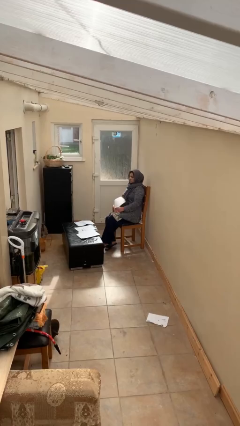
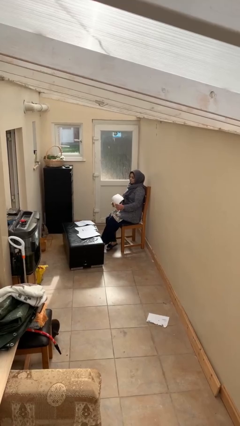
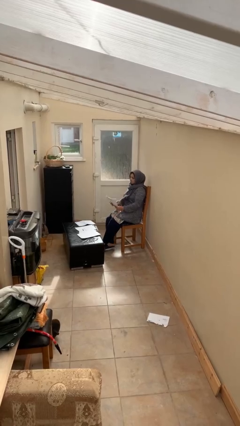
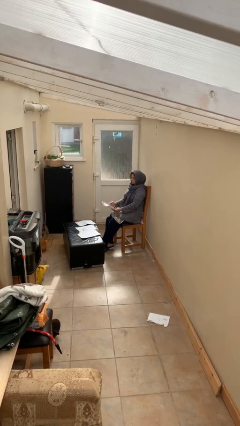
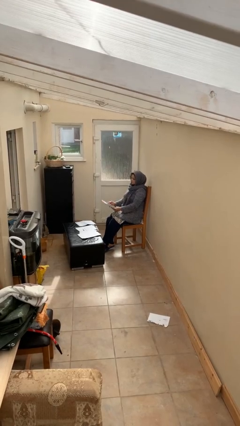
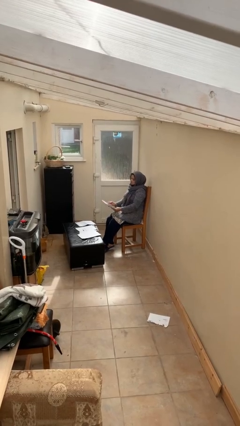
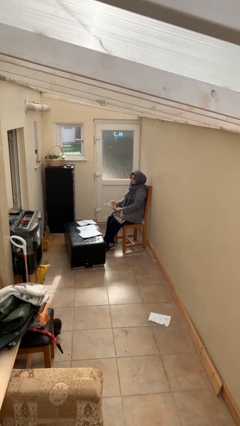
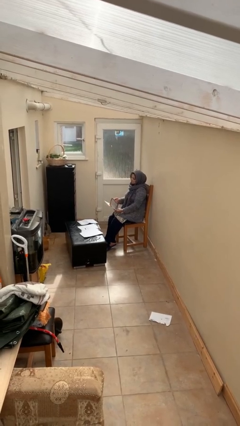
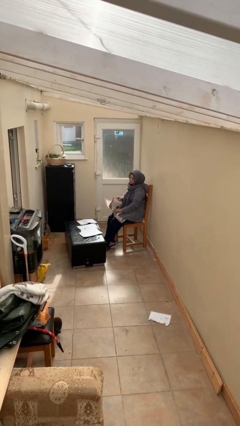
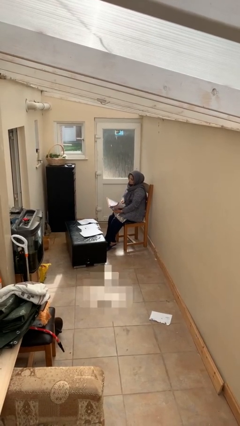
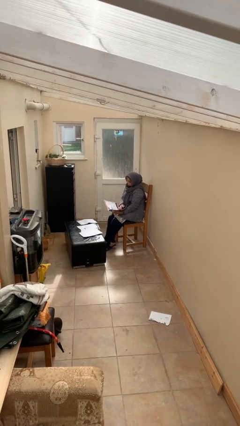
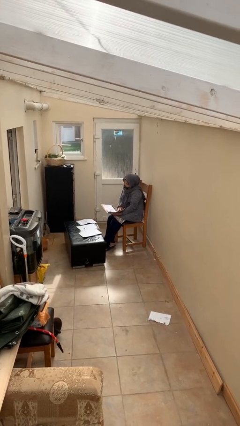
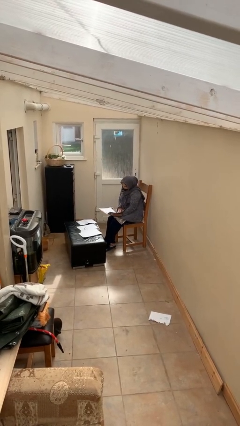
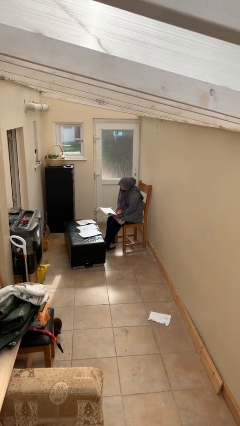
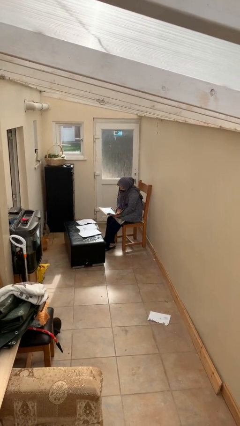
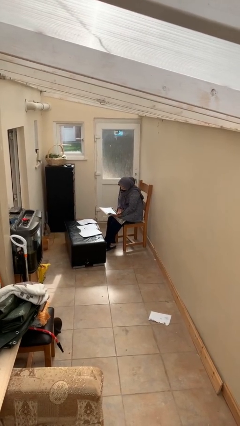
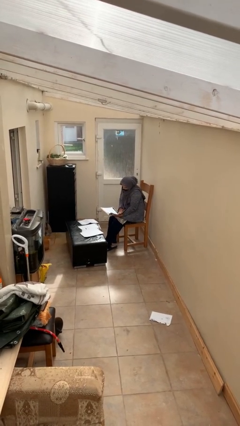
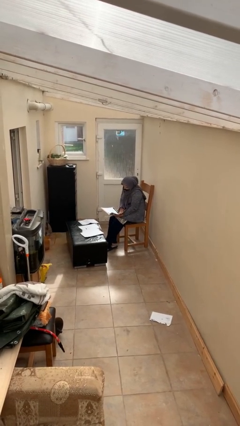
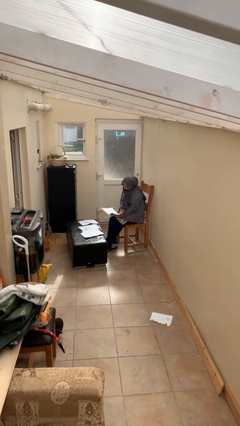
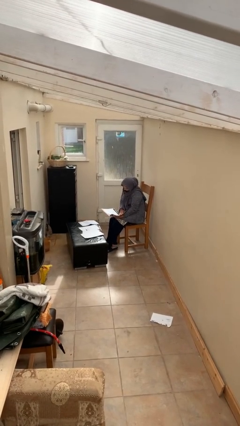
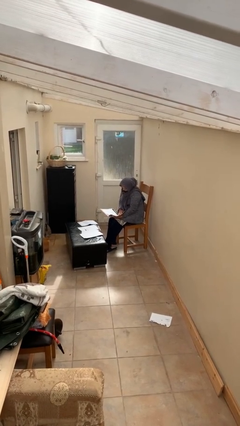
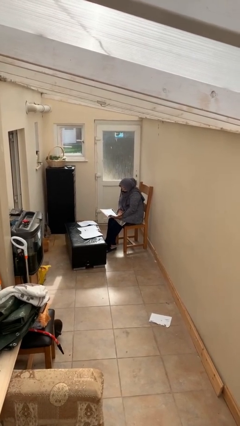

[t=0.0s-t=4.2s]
person reads document

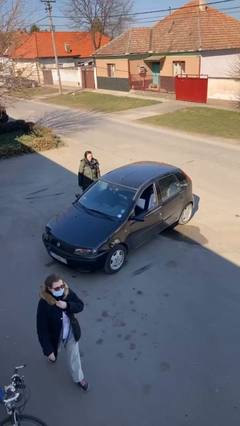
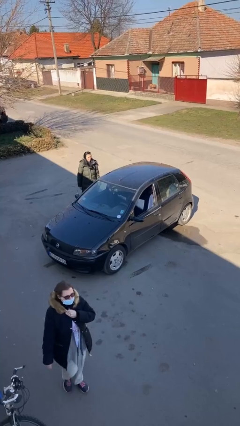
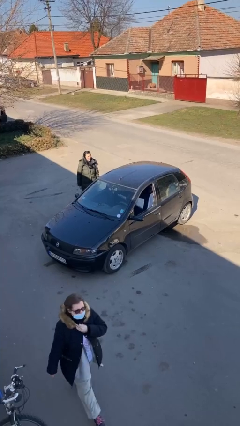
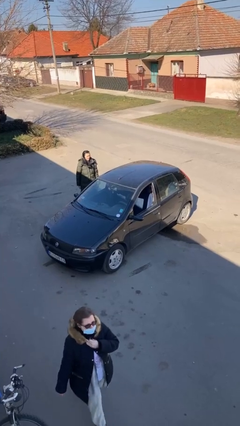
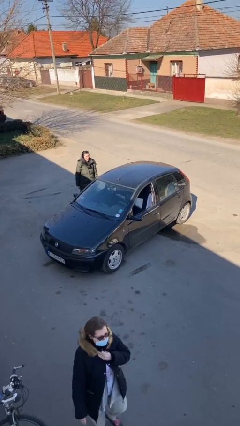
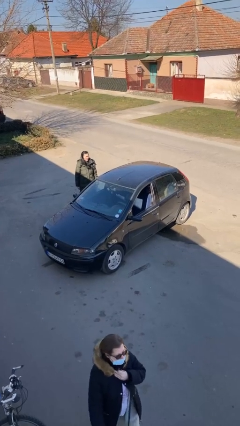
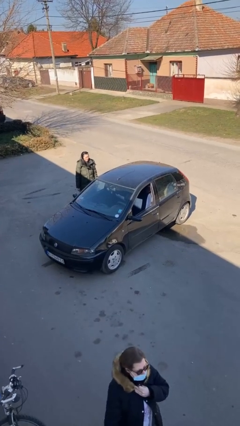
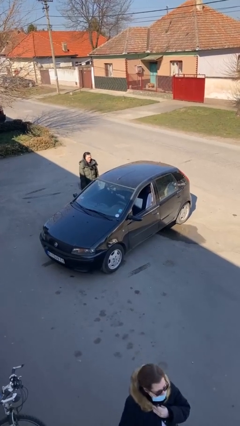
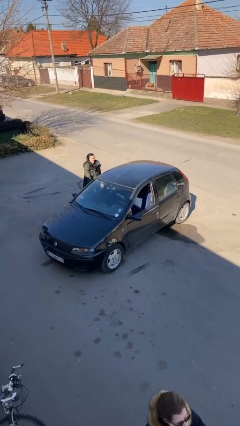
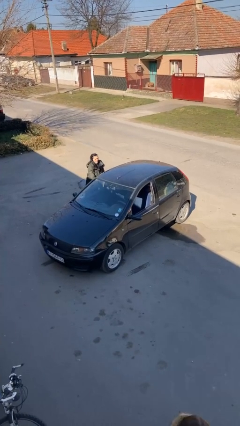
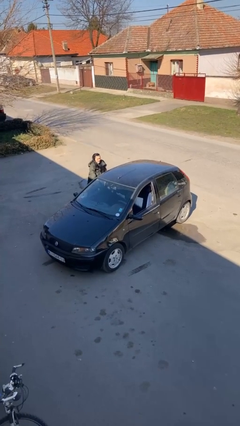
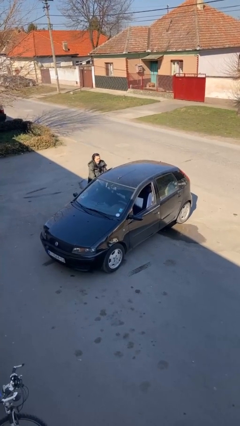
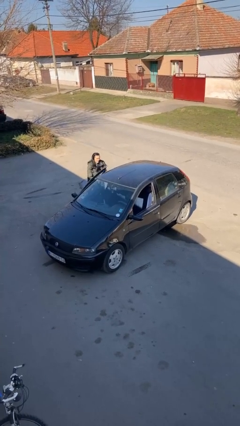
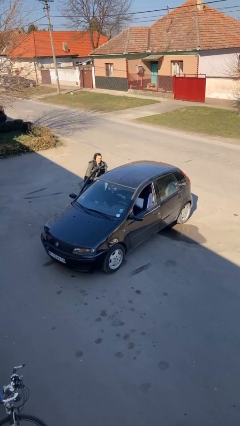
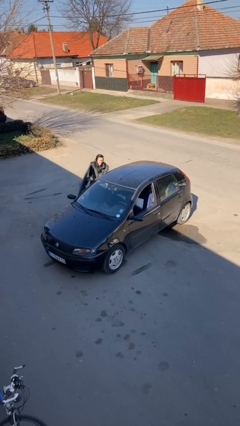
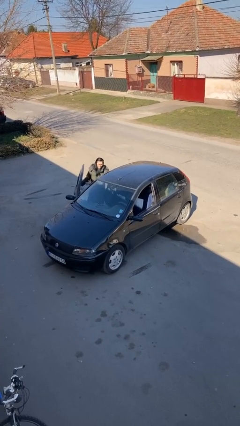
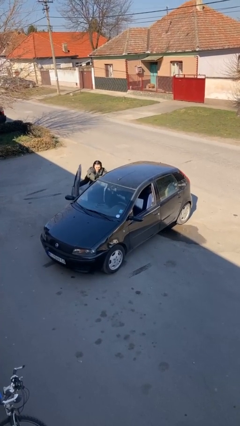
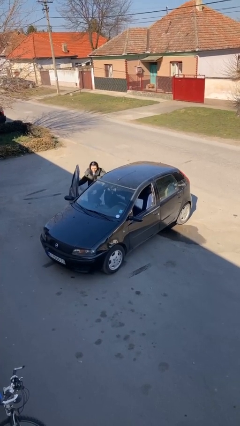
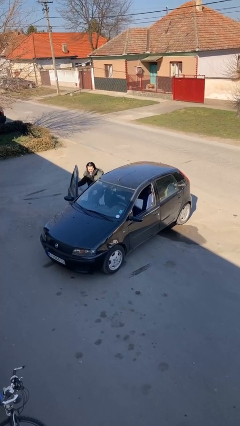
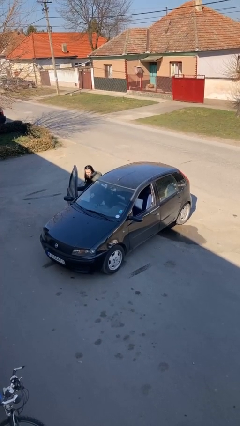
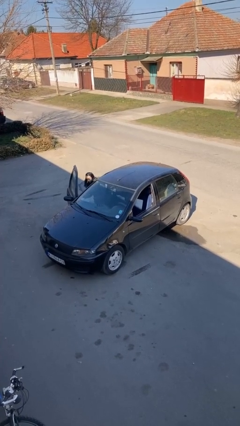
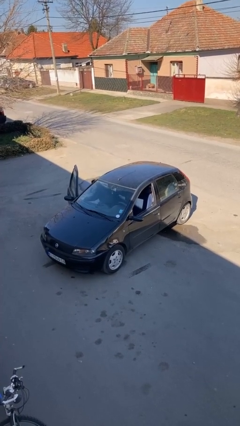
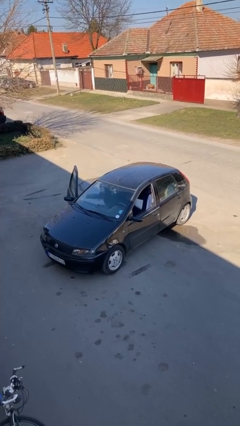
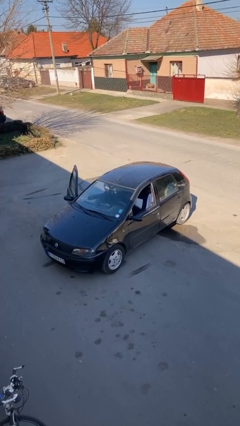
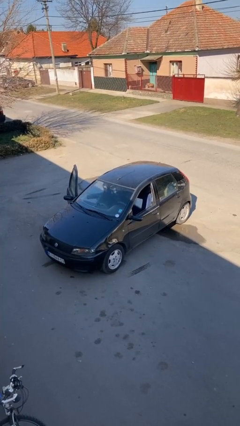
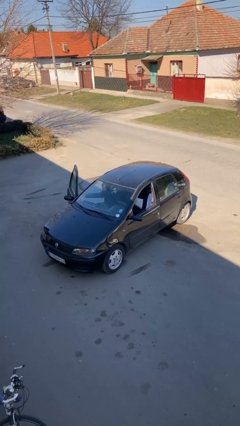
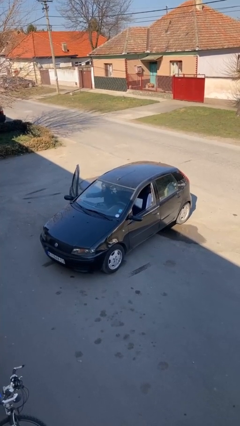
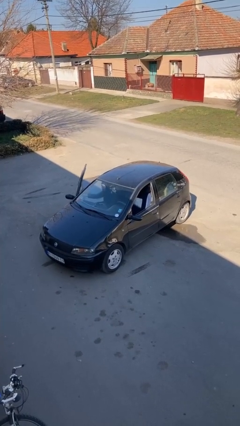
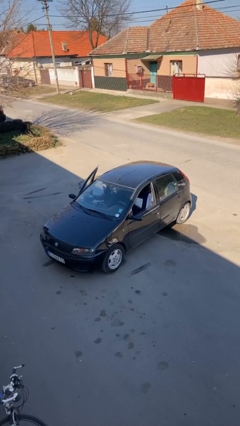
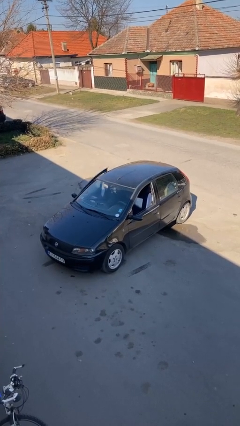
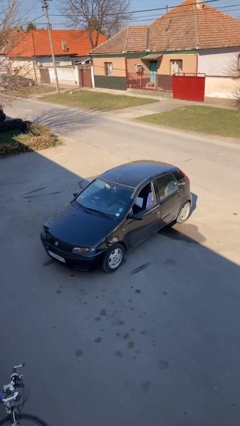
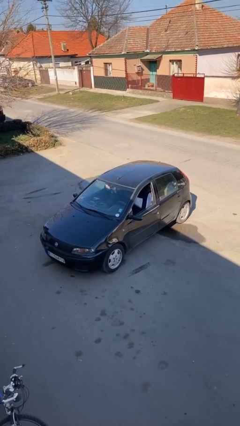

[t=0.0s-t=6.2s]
car picks up person

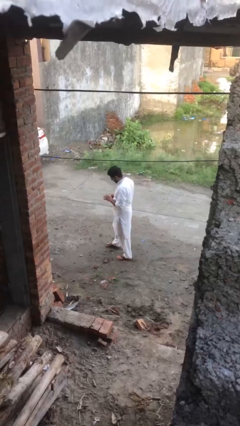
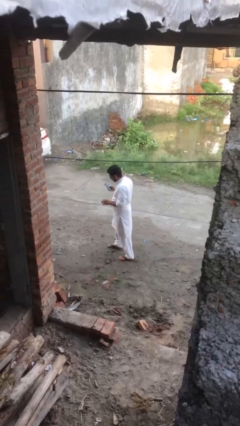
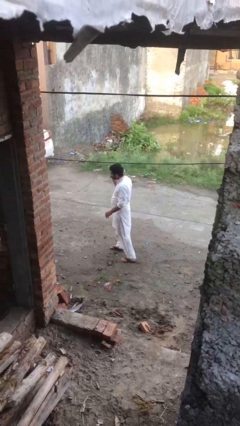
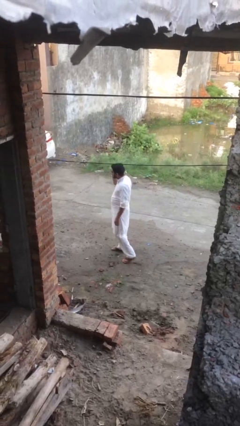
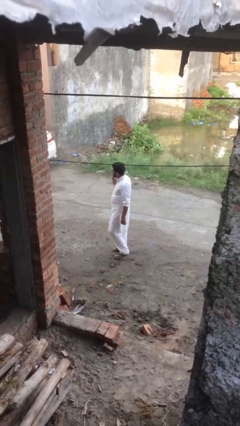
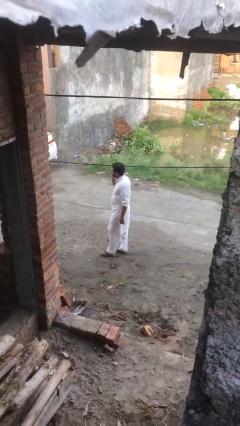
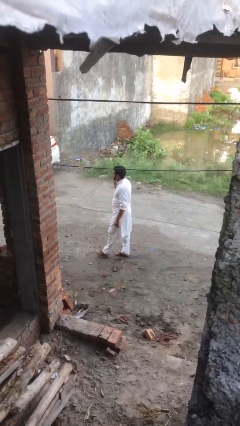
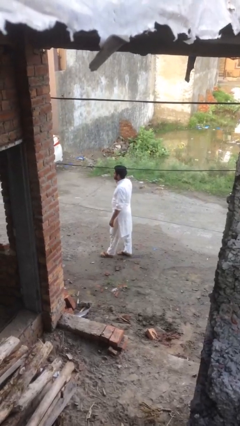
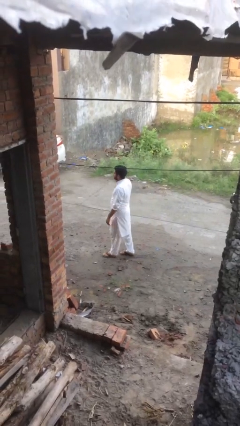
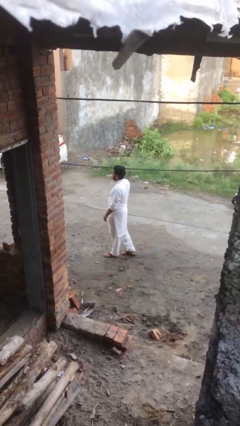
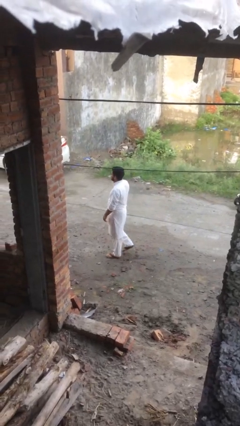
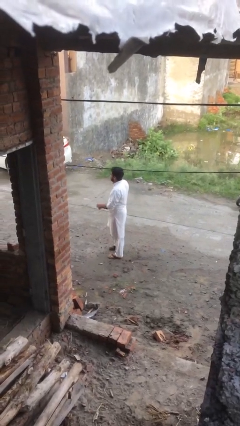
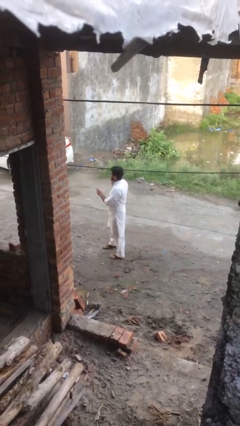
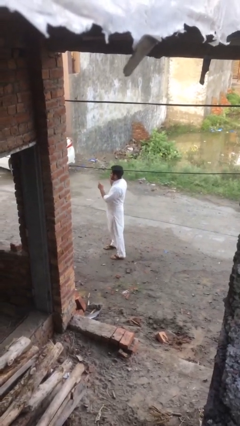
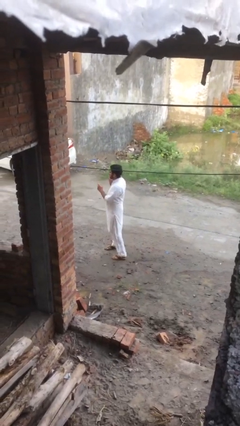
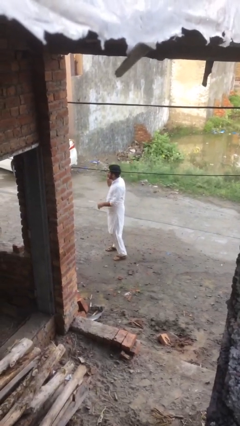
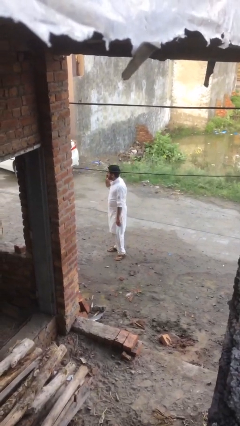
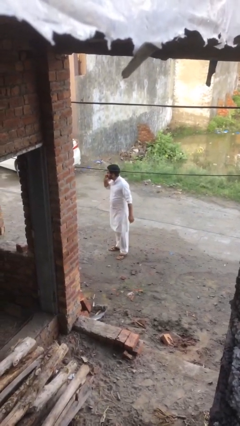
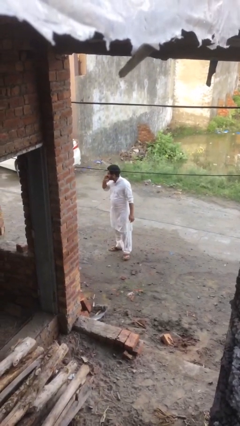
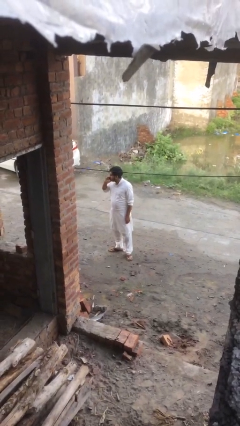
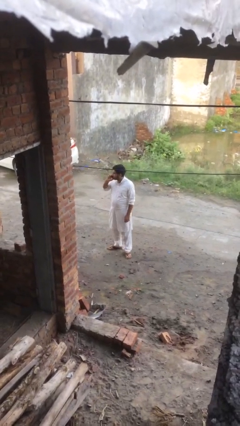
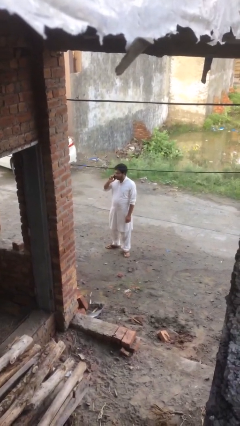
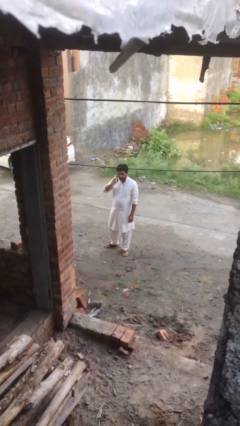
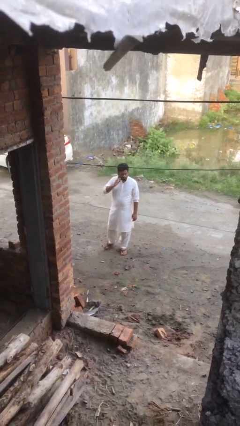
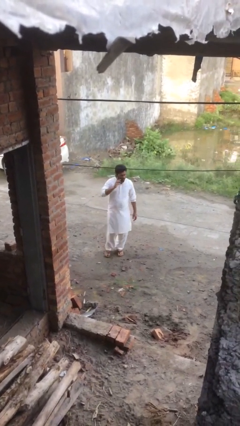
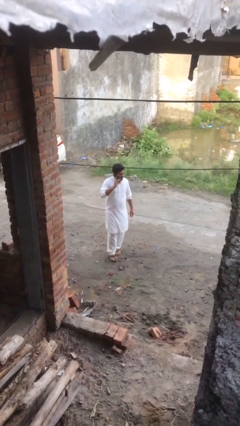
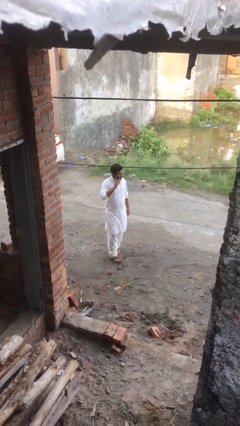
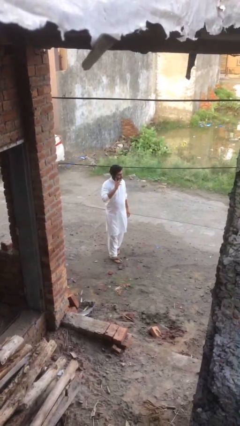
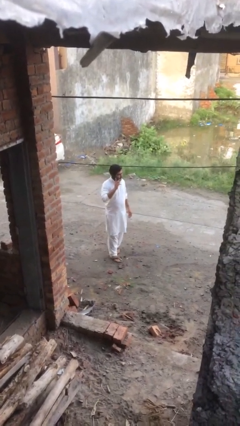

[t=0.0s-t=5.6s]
person talks on phone

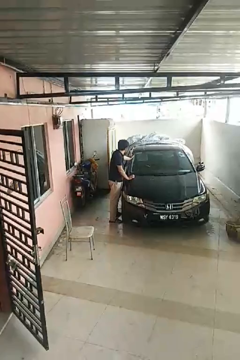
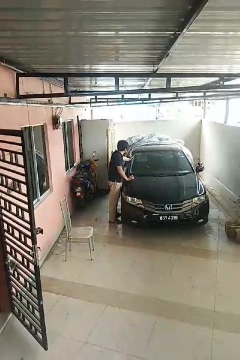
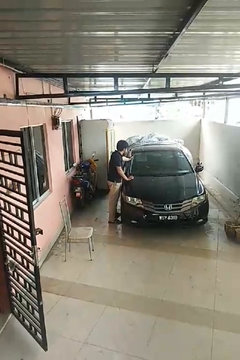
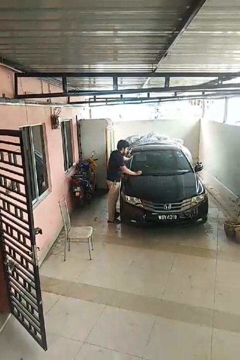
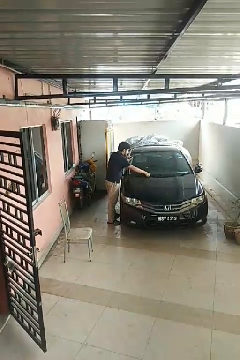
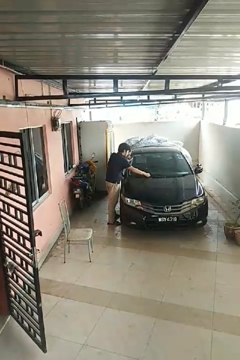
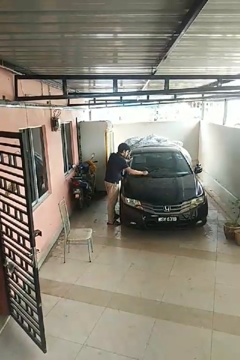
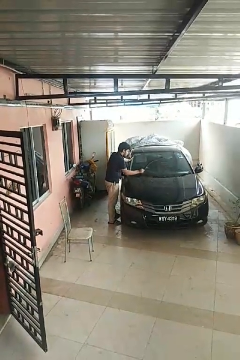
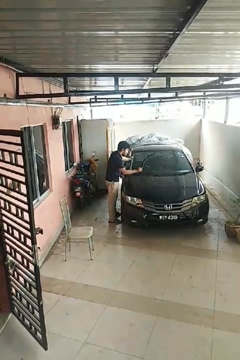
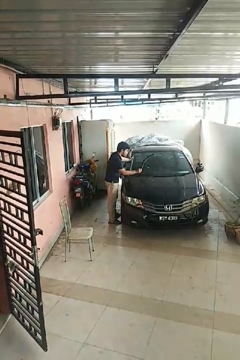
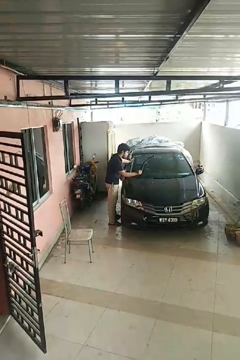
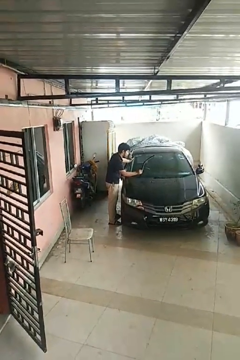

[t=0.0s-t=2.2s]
person flips up car wipers

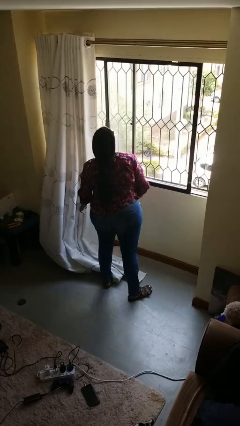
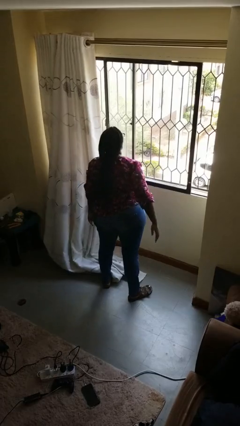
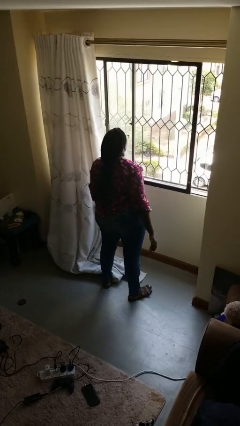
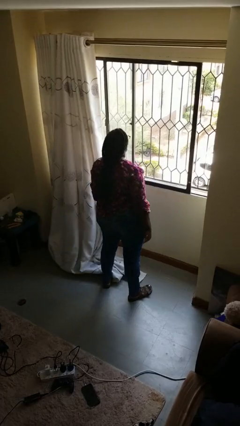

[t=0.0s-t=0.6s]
person closes curtains
